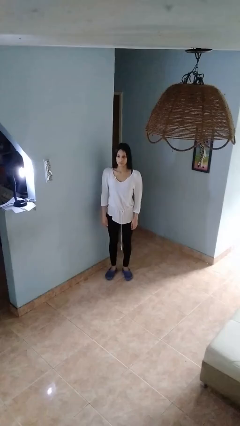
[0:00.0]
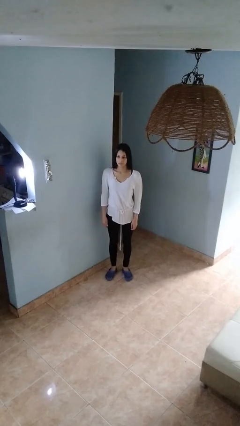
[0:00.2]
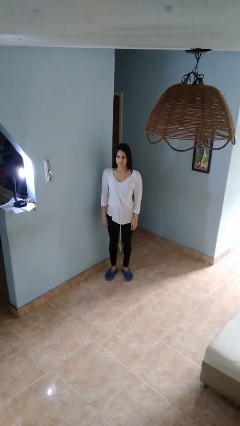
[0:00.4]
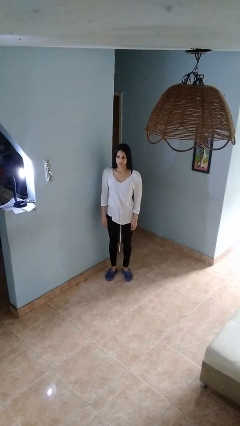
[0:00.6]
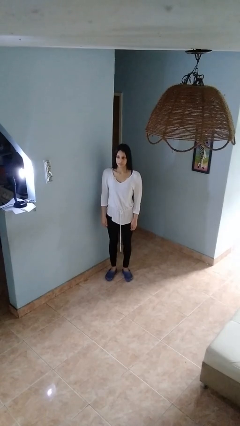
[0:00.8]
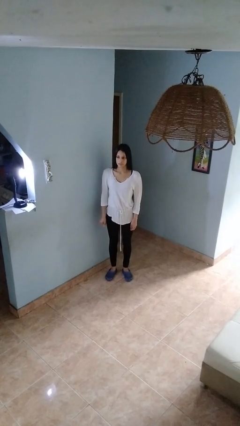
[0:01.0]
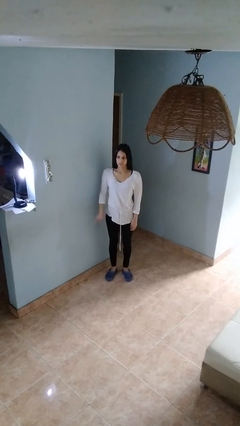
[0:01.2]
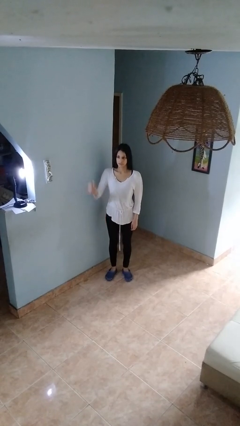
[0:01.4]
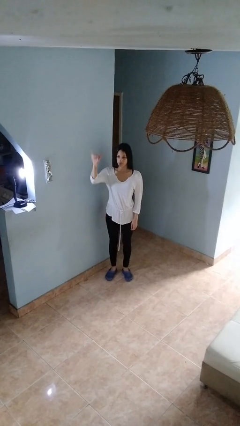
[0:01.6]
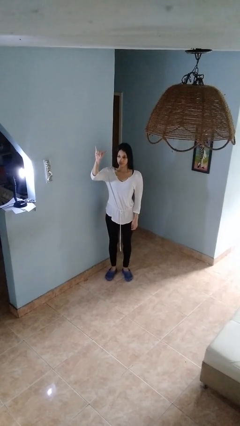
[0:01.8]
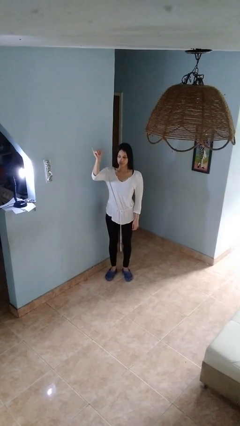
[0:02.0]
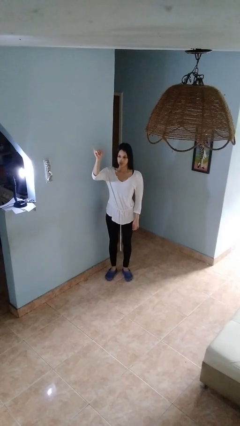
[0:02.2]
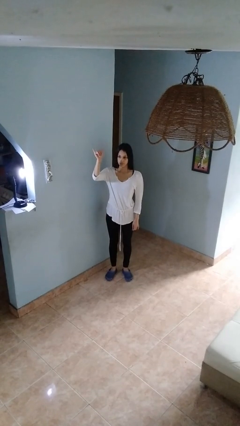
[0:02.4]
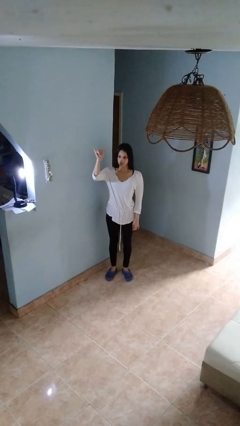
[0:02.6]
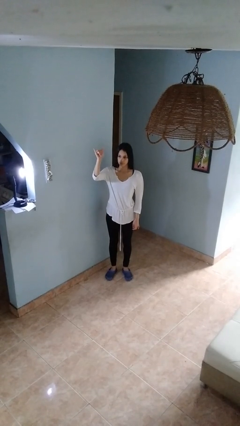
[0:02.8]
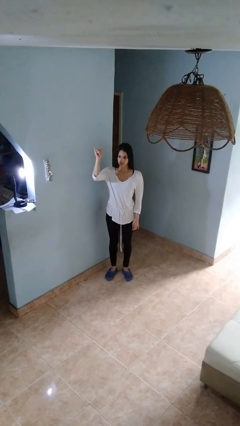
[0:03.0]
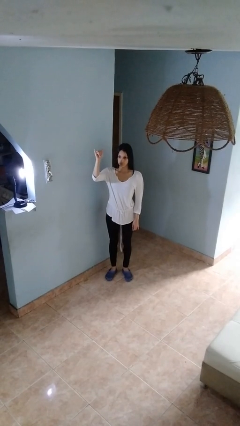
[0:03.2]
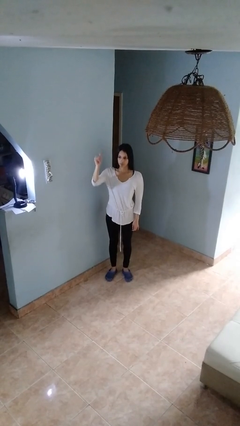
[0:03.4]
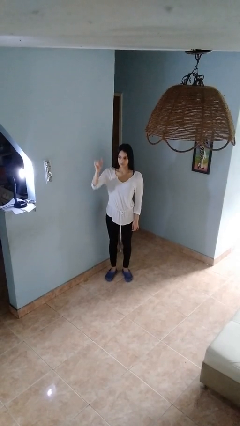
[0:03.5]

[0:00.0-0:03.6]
person gestures hang loose

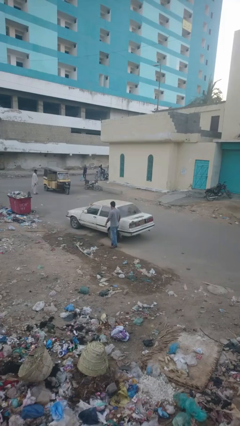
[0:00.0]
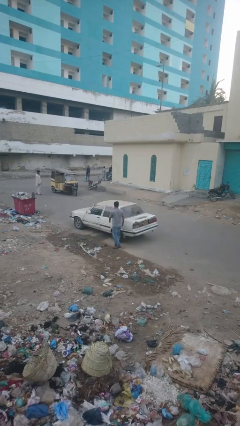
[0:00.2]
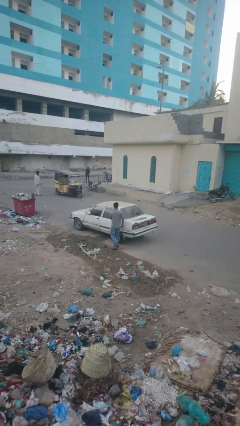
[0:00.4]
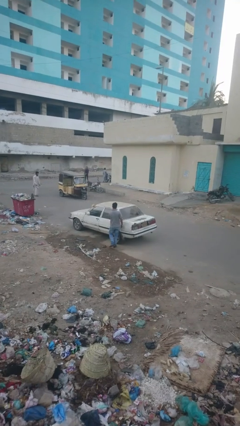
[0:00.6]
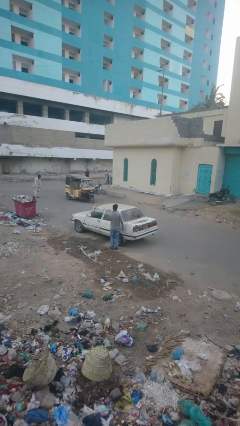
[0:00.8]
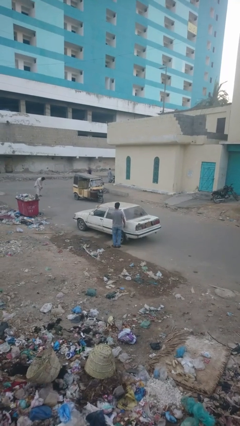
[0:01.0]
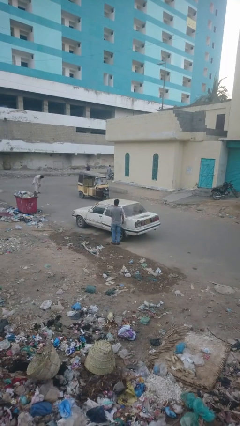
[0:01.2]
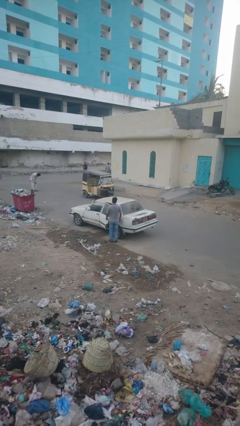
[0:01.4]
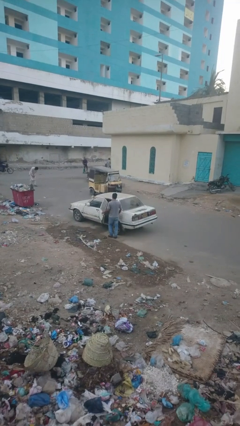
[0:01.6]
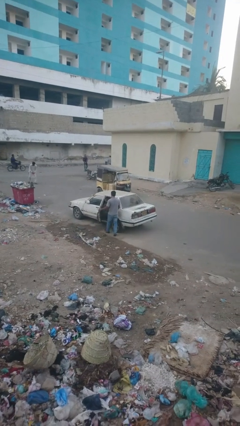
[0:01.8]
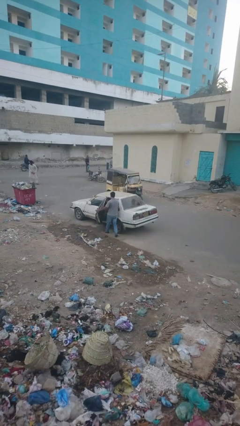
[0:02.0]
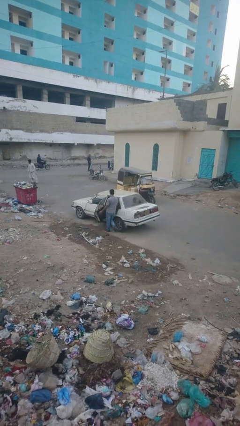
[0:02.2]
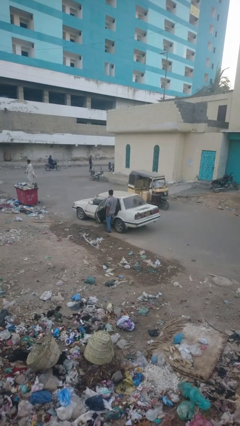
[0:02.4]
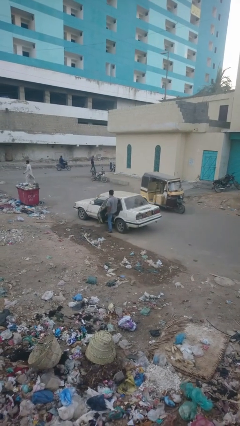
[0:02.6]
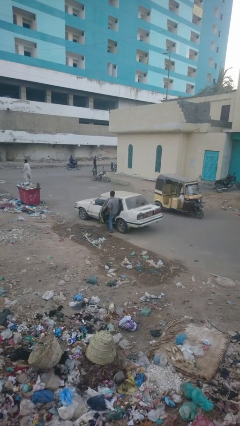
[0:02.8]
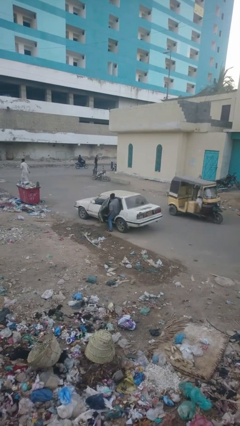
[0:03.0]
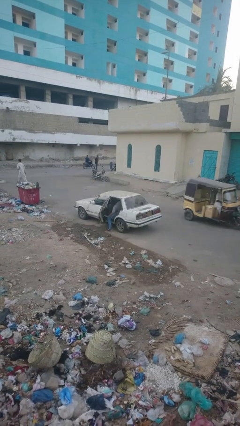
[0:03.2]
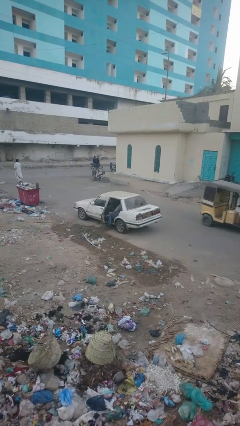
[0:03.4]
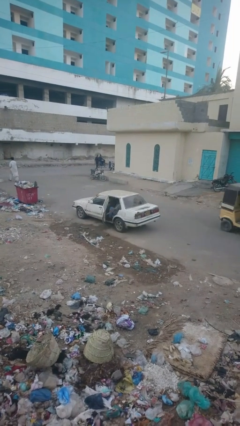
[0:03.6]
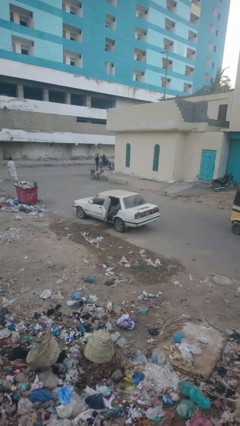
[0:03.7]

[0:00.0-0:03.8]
car picks up person

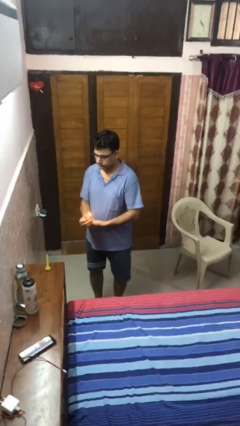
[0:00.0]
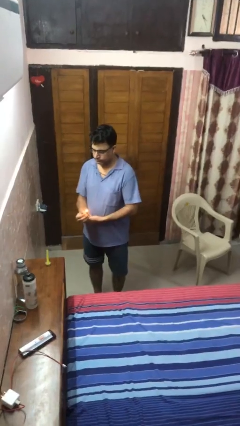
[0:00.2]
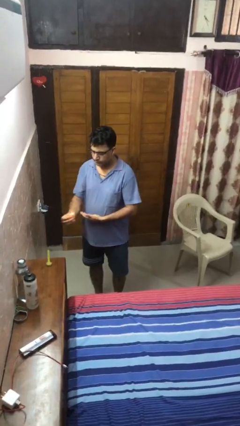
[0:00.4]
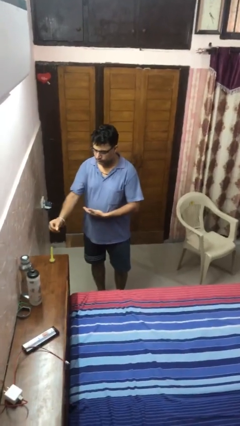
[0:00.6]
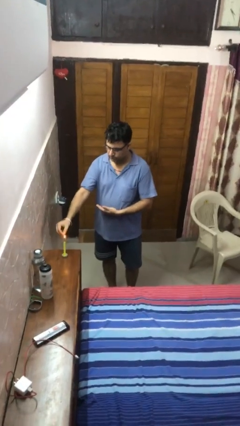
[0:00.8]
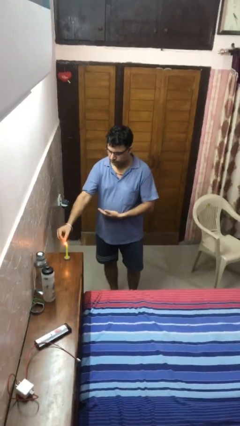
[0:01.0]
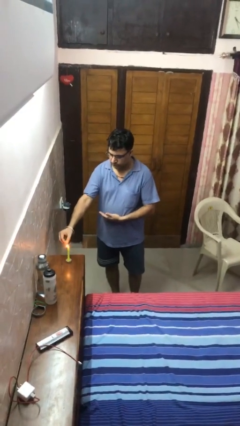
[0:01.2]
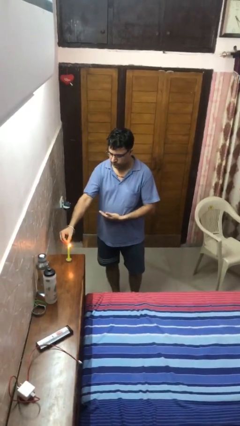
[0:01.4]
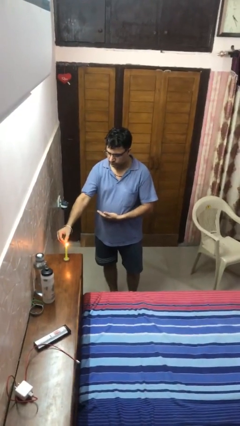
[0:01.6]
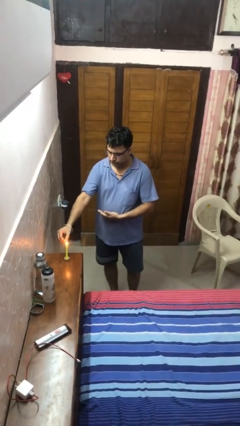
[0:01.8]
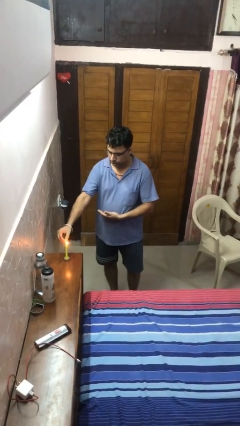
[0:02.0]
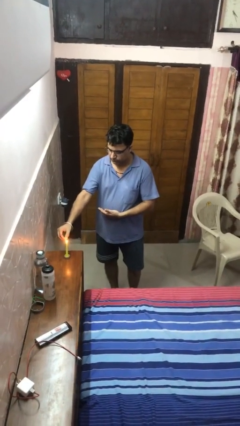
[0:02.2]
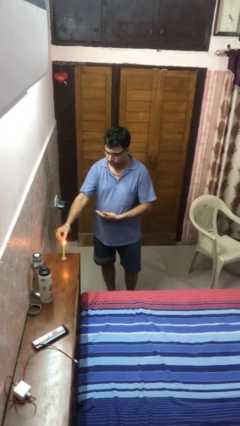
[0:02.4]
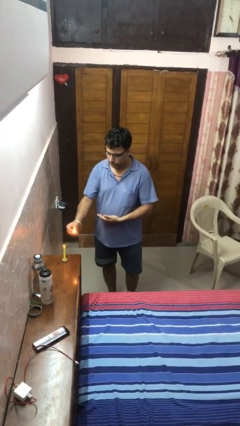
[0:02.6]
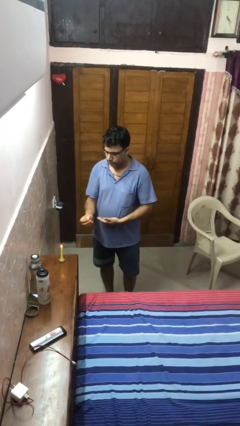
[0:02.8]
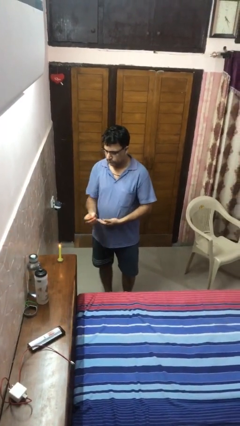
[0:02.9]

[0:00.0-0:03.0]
person lights candle

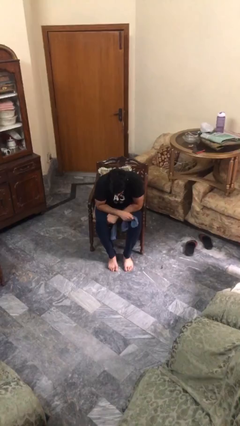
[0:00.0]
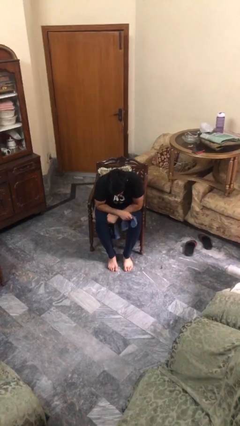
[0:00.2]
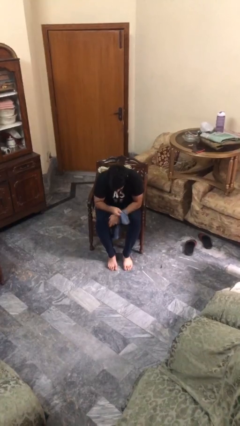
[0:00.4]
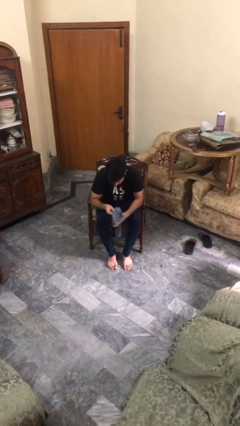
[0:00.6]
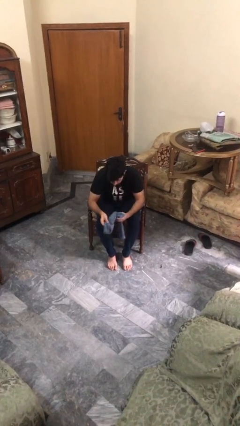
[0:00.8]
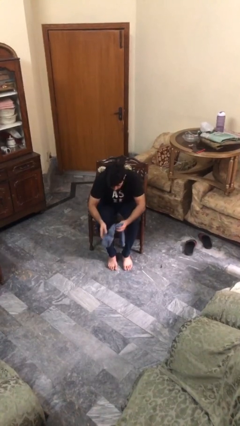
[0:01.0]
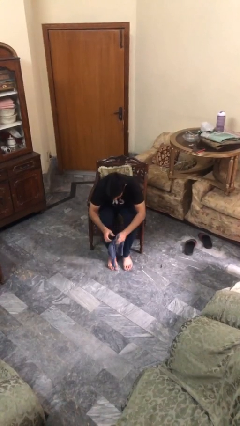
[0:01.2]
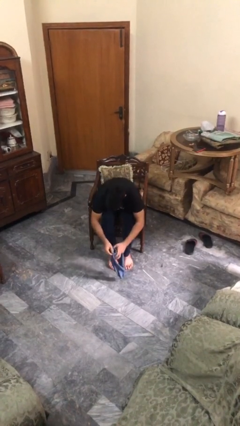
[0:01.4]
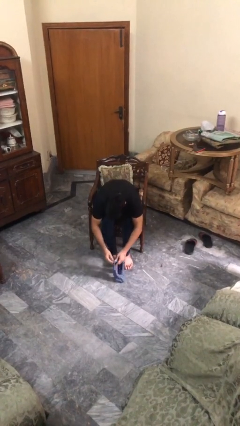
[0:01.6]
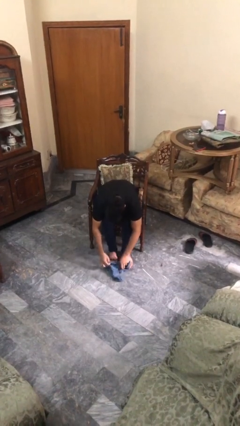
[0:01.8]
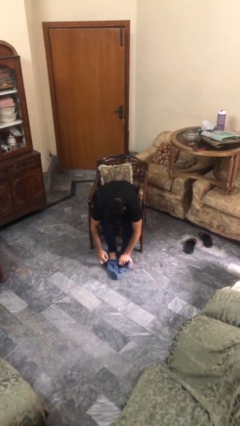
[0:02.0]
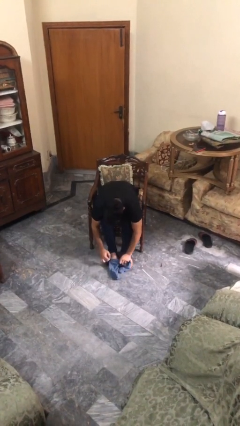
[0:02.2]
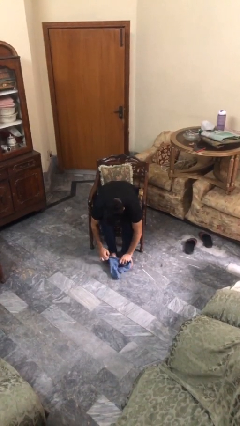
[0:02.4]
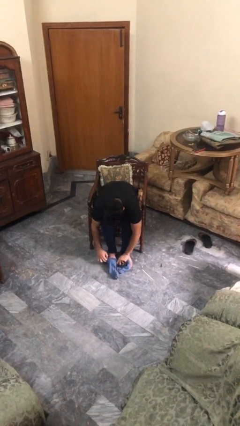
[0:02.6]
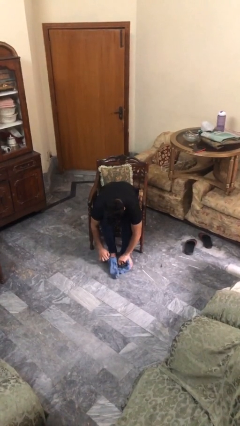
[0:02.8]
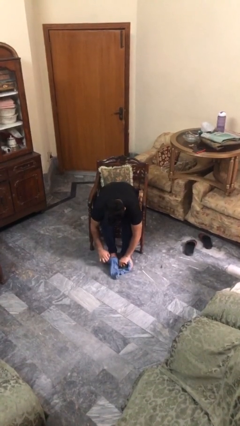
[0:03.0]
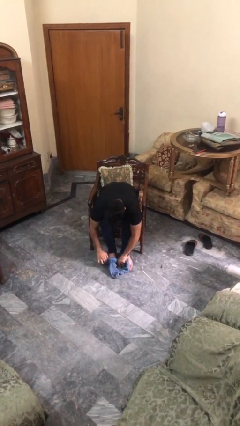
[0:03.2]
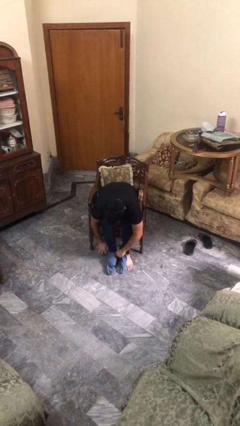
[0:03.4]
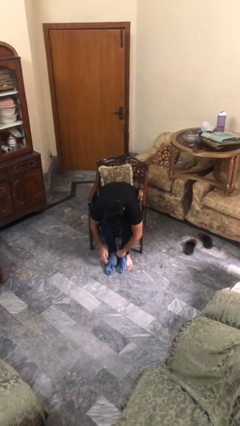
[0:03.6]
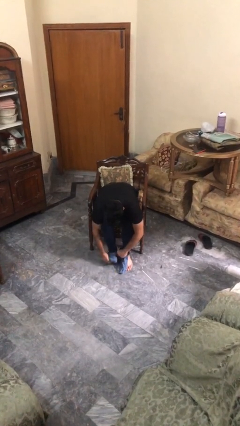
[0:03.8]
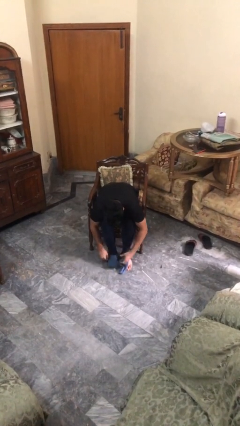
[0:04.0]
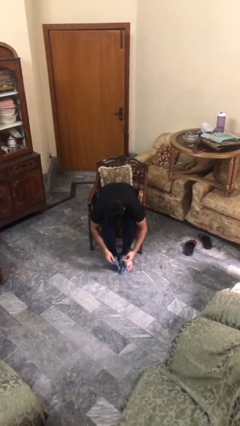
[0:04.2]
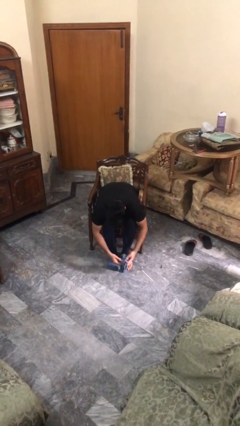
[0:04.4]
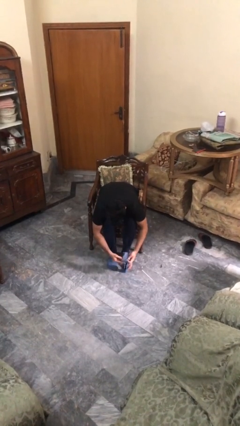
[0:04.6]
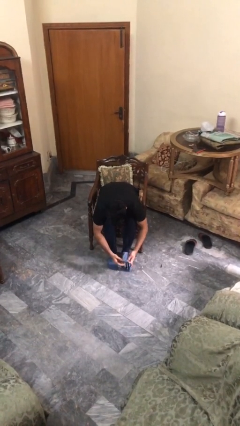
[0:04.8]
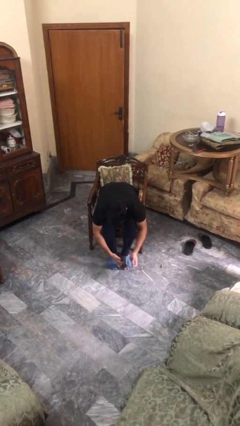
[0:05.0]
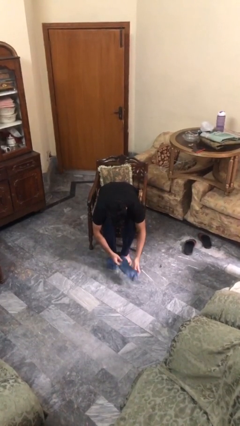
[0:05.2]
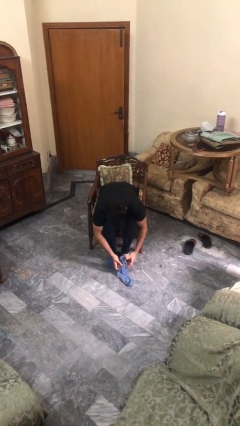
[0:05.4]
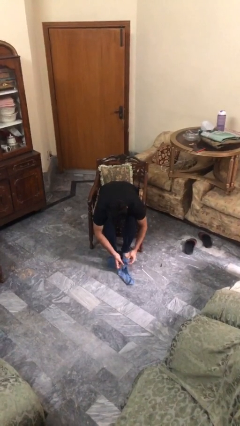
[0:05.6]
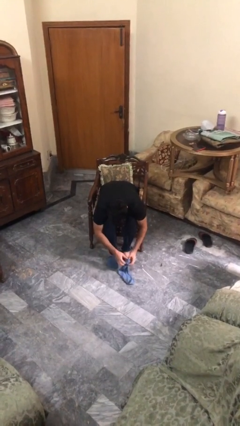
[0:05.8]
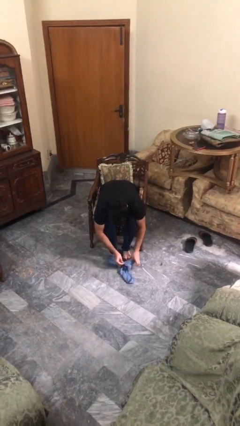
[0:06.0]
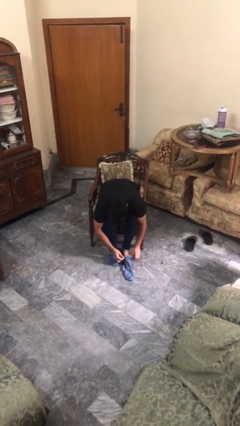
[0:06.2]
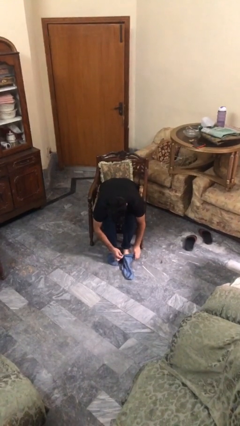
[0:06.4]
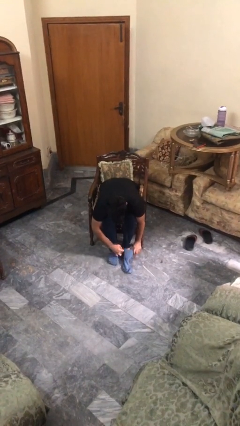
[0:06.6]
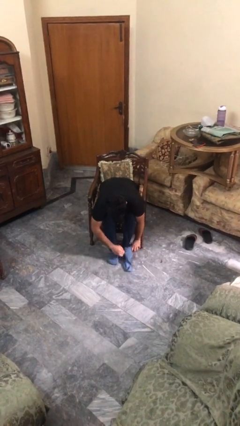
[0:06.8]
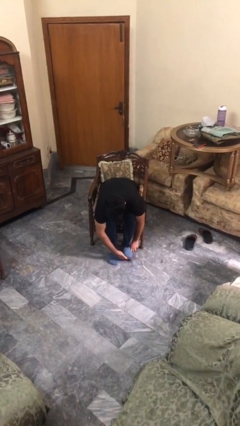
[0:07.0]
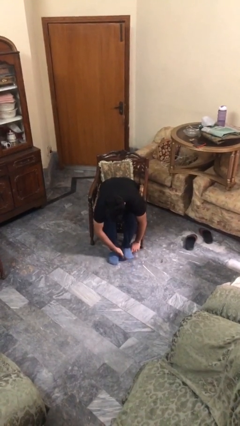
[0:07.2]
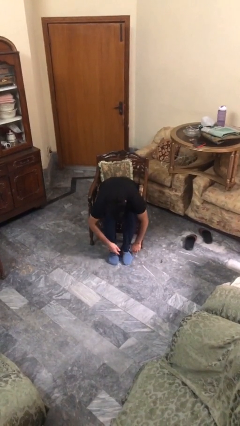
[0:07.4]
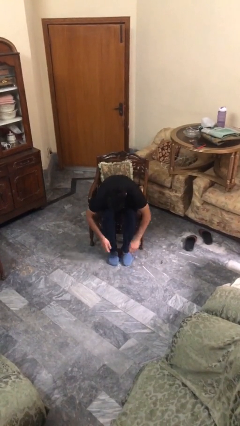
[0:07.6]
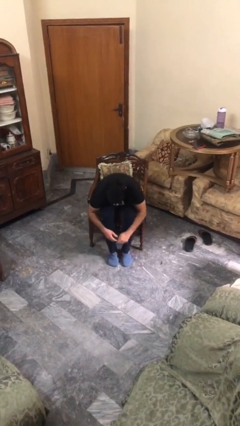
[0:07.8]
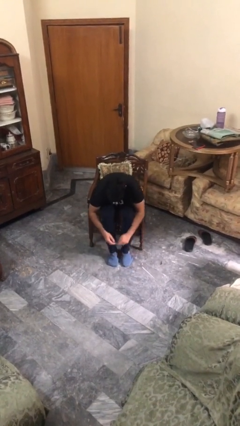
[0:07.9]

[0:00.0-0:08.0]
person puts on socks
